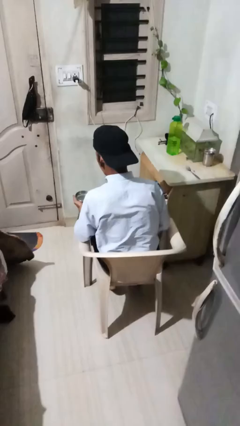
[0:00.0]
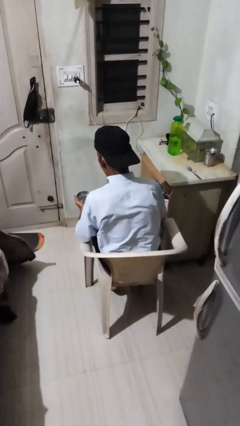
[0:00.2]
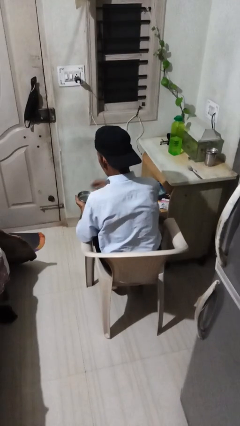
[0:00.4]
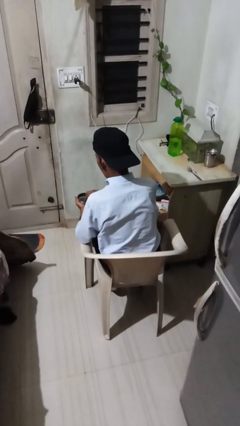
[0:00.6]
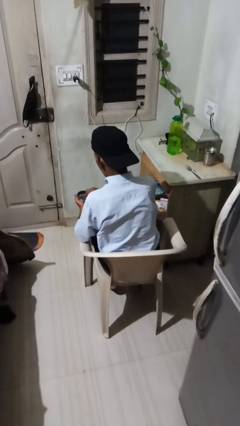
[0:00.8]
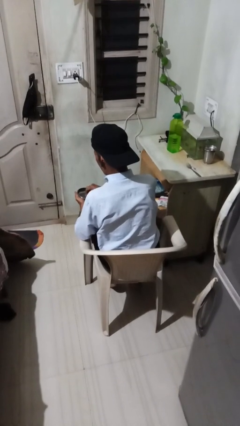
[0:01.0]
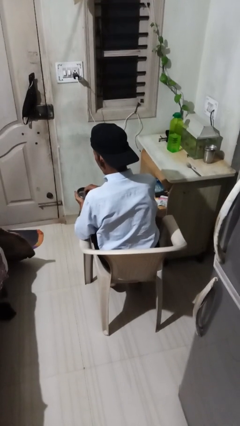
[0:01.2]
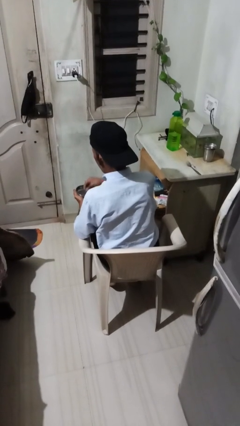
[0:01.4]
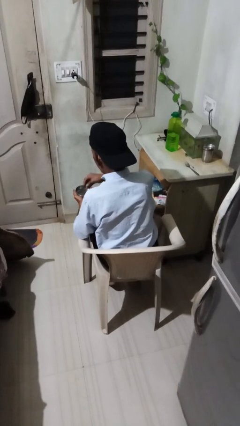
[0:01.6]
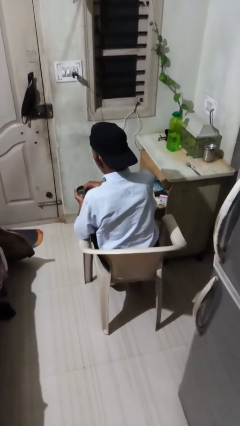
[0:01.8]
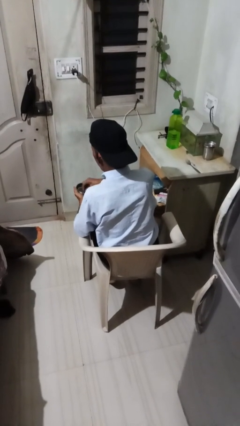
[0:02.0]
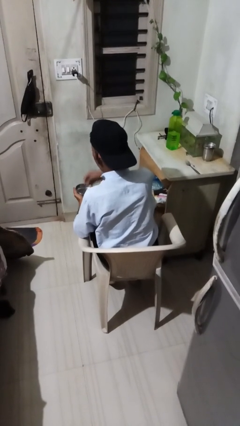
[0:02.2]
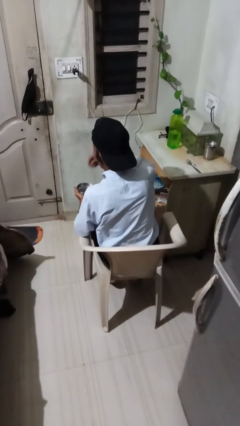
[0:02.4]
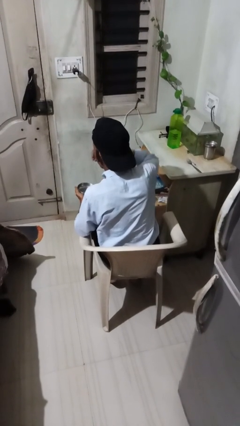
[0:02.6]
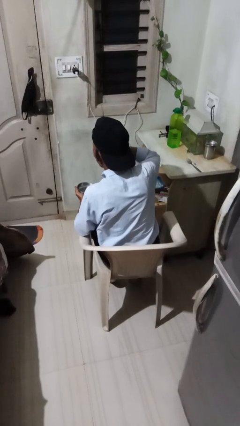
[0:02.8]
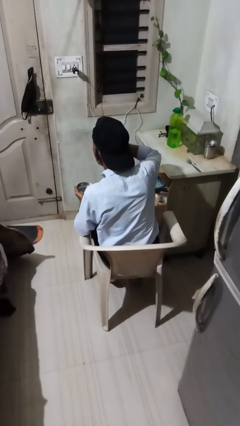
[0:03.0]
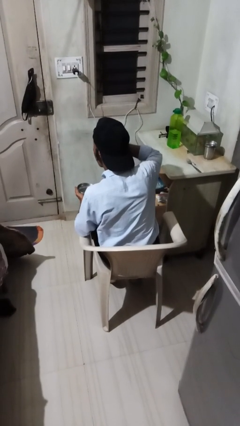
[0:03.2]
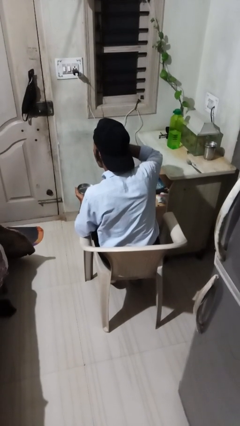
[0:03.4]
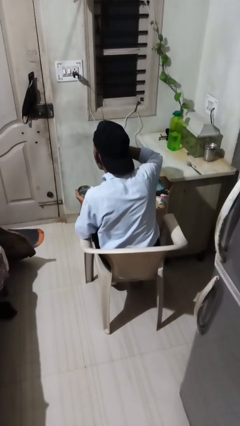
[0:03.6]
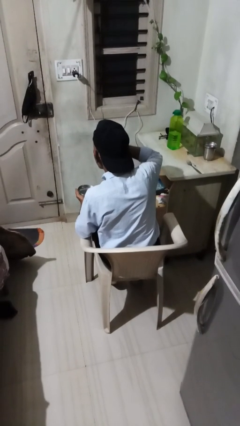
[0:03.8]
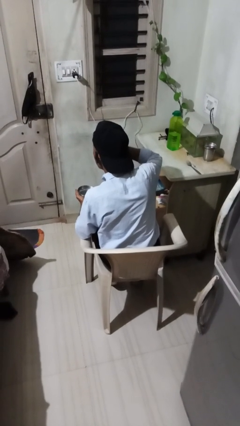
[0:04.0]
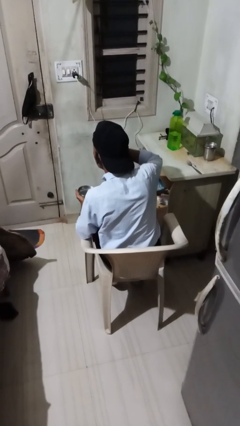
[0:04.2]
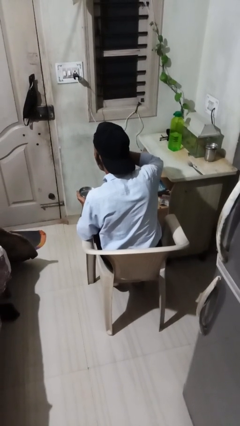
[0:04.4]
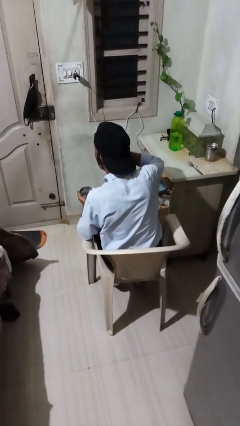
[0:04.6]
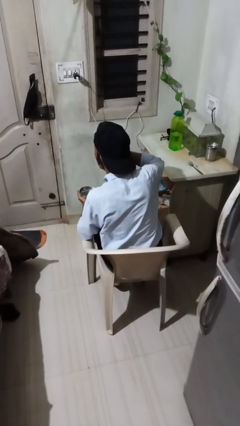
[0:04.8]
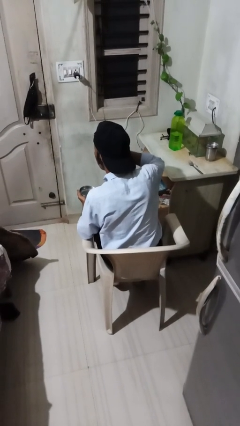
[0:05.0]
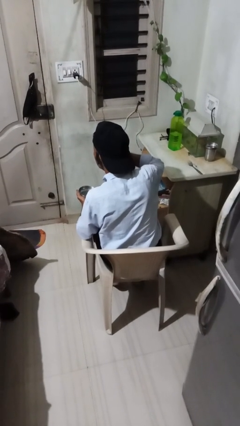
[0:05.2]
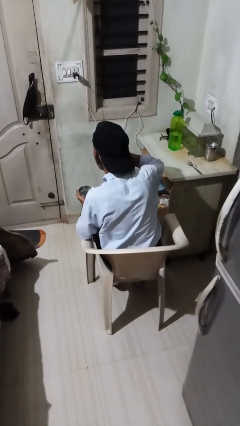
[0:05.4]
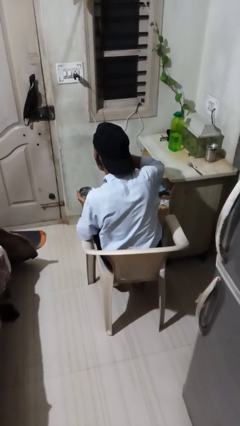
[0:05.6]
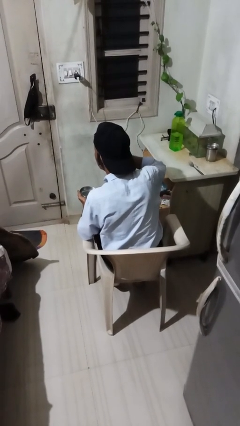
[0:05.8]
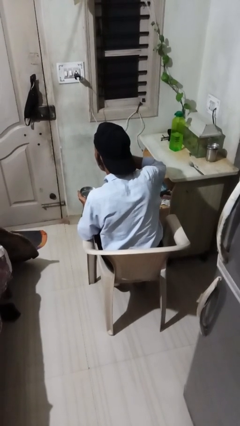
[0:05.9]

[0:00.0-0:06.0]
person eats with hands

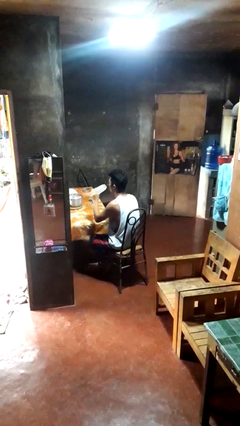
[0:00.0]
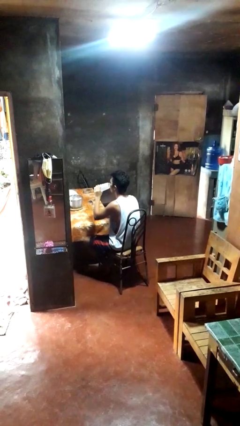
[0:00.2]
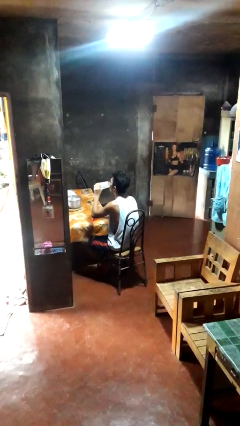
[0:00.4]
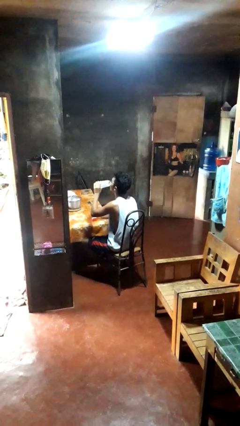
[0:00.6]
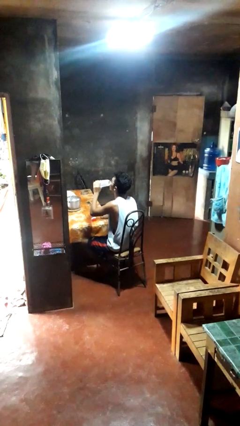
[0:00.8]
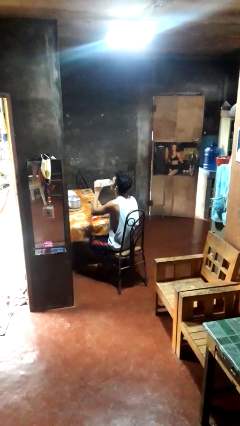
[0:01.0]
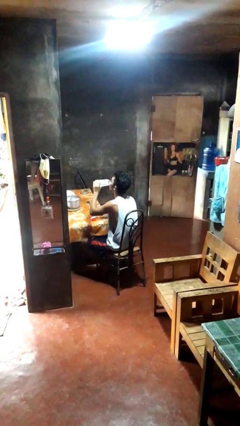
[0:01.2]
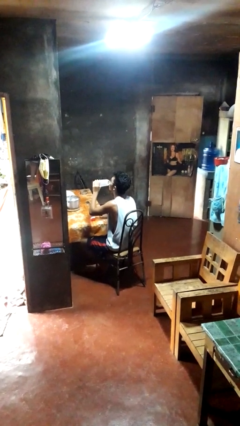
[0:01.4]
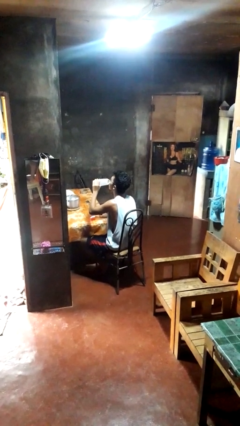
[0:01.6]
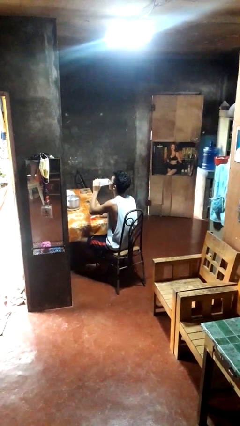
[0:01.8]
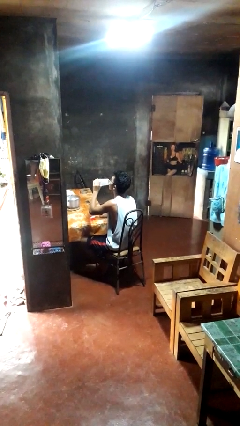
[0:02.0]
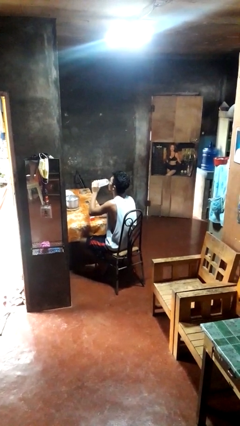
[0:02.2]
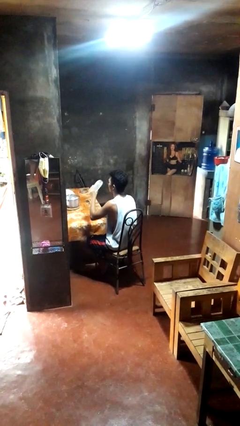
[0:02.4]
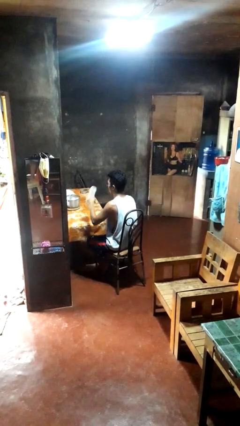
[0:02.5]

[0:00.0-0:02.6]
person drinks from bottle

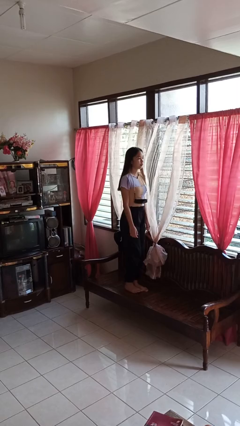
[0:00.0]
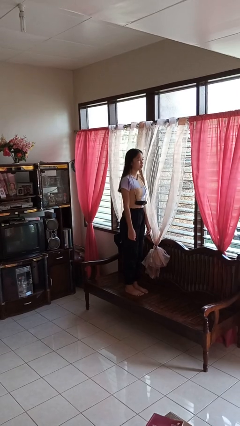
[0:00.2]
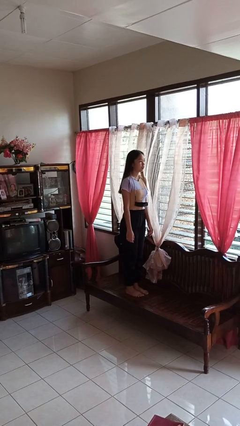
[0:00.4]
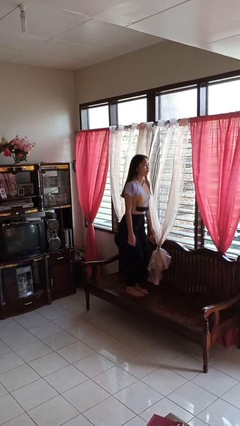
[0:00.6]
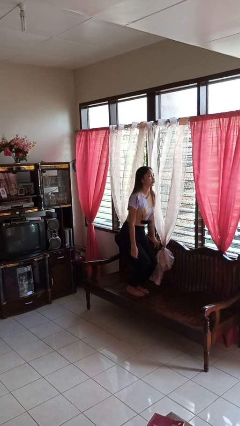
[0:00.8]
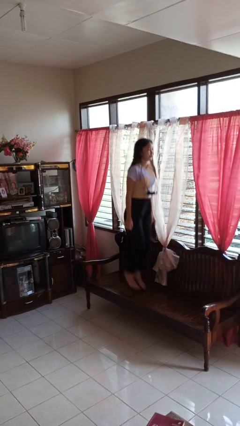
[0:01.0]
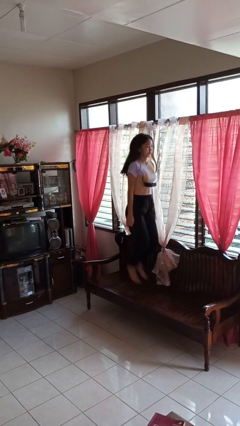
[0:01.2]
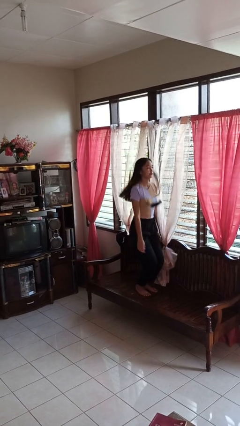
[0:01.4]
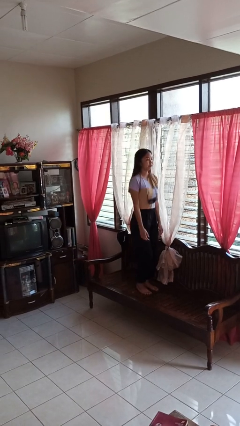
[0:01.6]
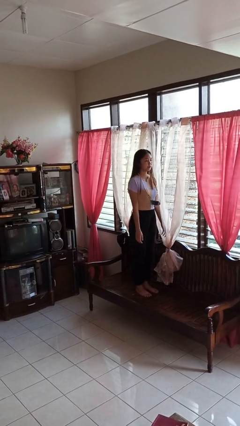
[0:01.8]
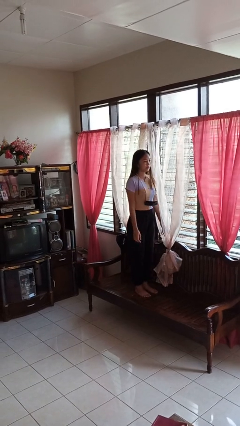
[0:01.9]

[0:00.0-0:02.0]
person jumps on couch

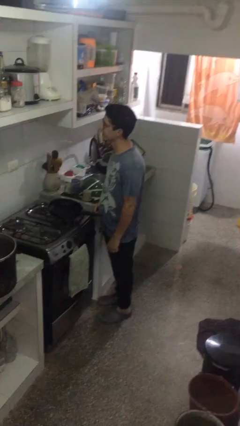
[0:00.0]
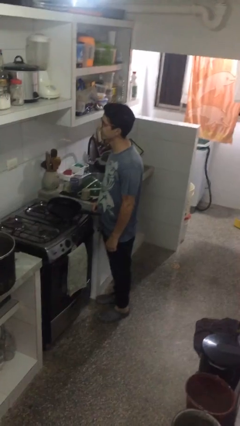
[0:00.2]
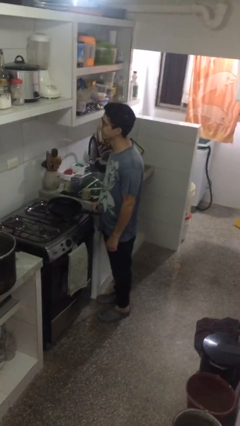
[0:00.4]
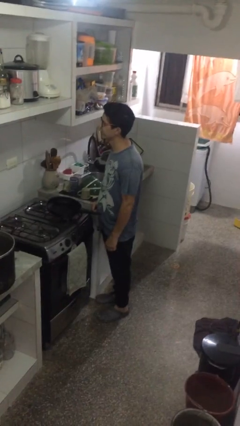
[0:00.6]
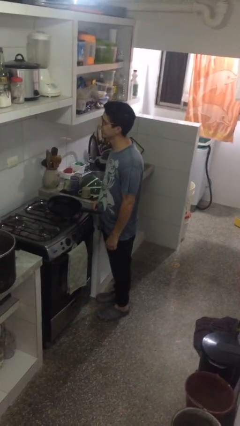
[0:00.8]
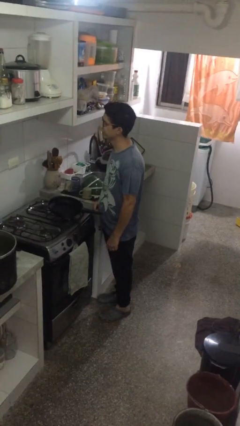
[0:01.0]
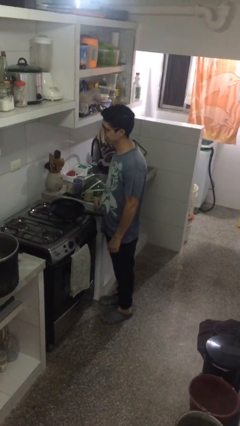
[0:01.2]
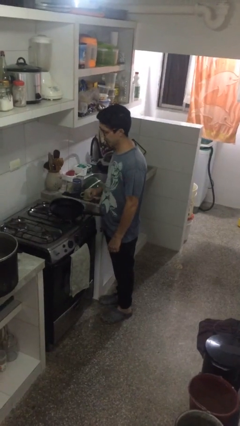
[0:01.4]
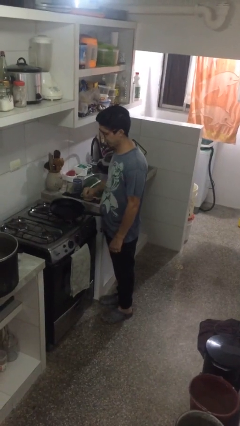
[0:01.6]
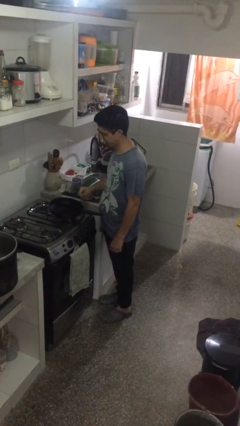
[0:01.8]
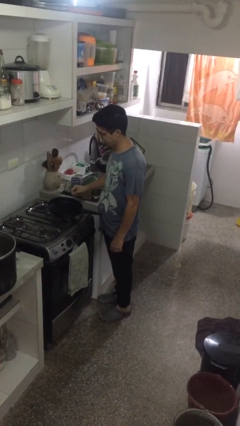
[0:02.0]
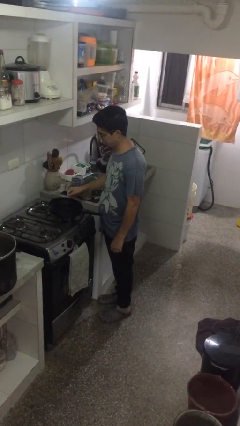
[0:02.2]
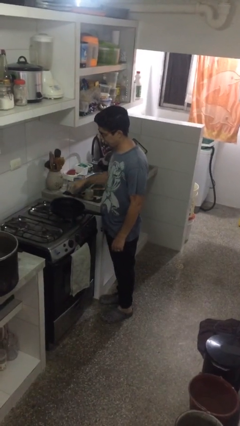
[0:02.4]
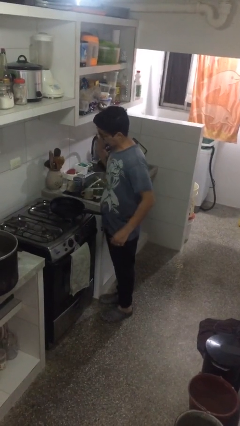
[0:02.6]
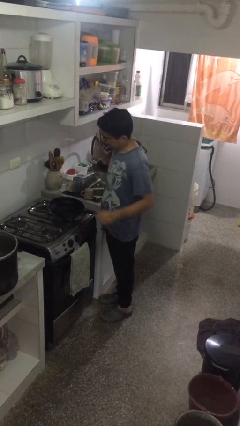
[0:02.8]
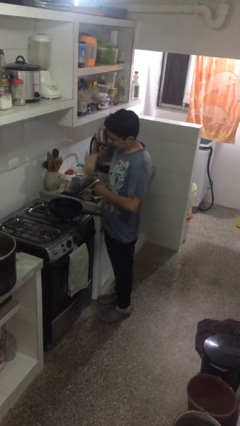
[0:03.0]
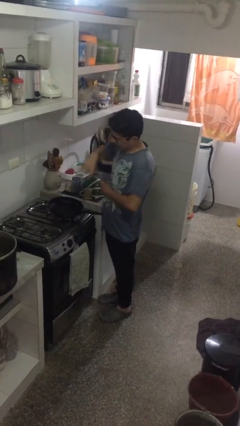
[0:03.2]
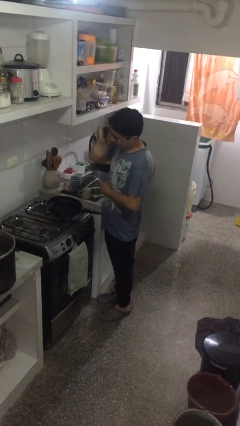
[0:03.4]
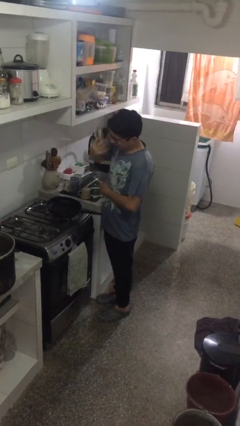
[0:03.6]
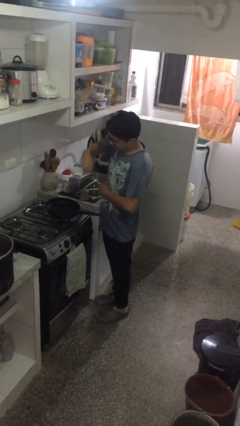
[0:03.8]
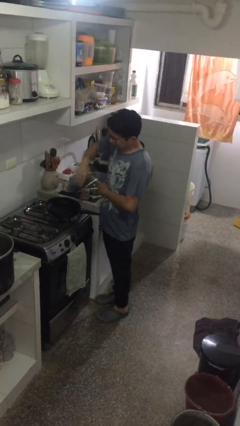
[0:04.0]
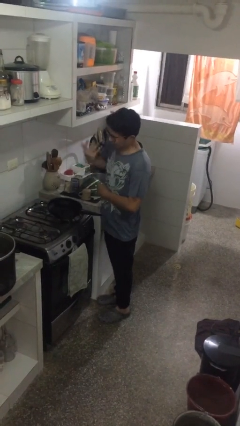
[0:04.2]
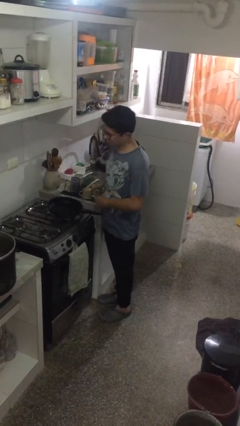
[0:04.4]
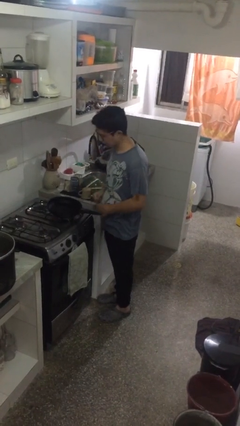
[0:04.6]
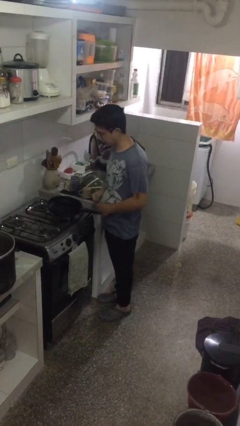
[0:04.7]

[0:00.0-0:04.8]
person burns hand

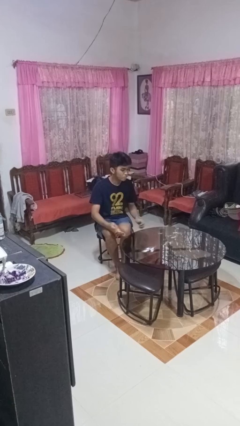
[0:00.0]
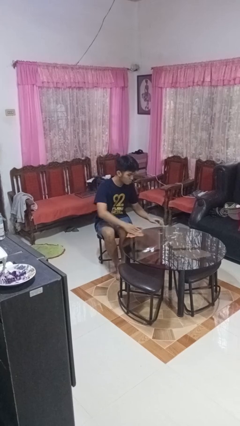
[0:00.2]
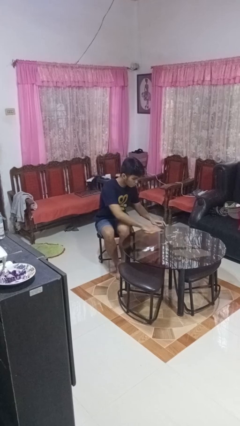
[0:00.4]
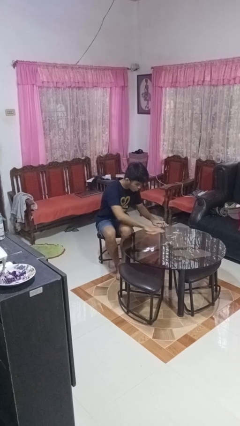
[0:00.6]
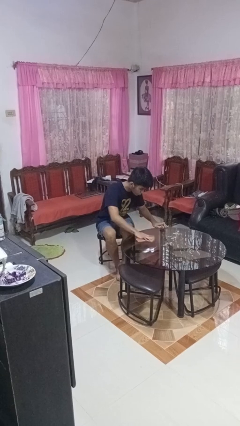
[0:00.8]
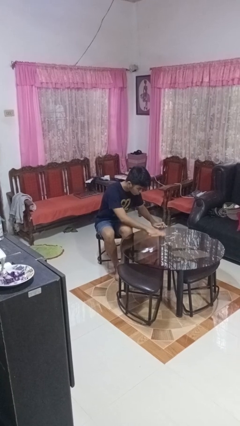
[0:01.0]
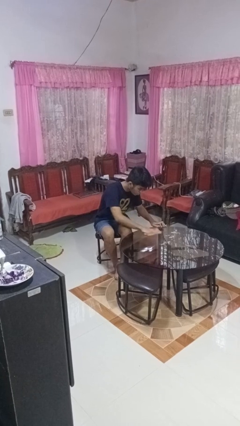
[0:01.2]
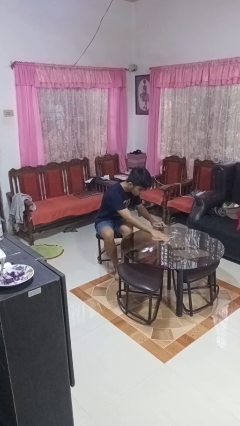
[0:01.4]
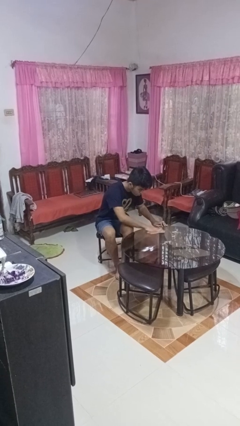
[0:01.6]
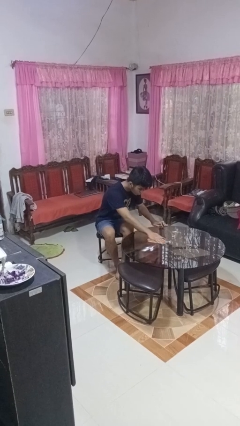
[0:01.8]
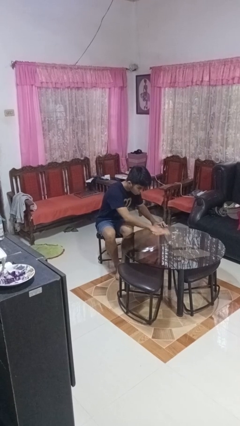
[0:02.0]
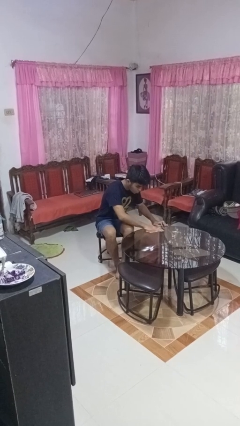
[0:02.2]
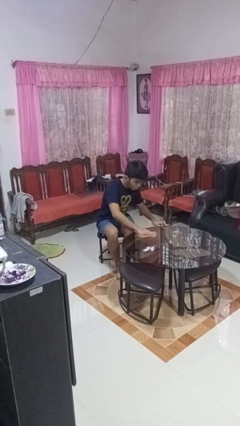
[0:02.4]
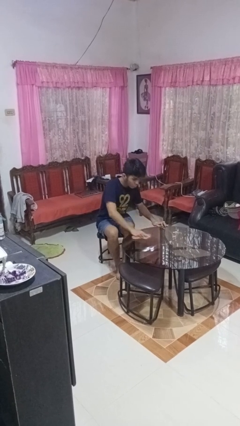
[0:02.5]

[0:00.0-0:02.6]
person cleans table with rag
